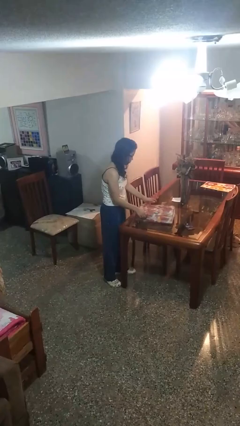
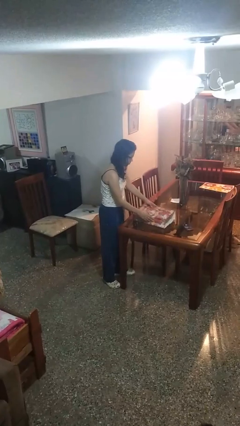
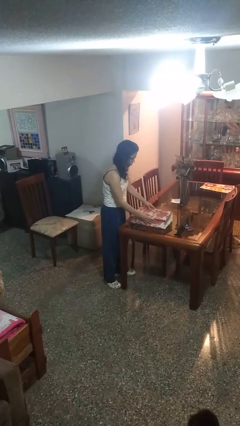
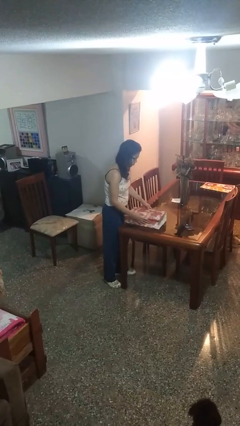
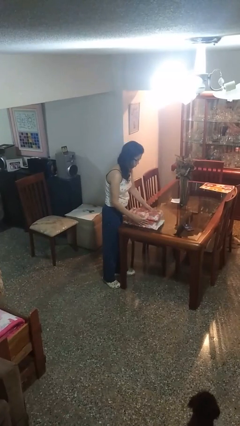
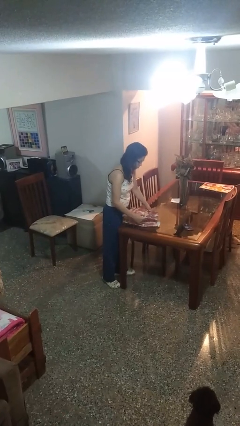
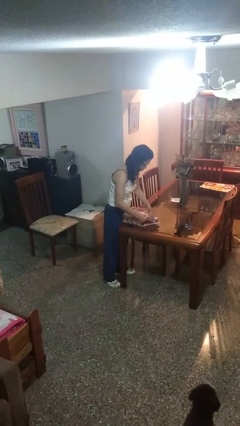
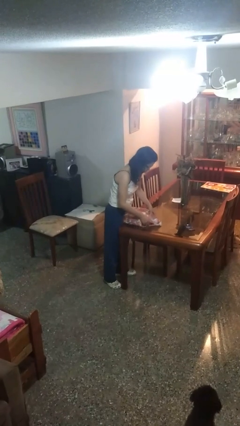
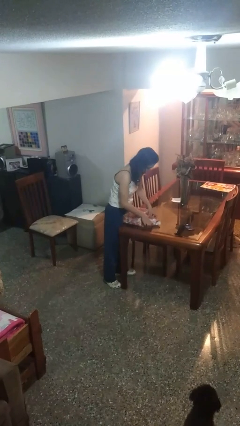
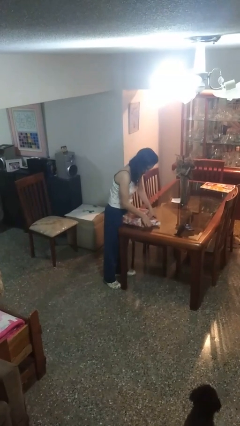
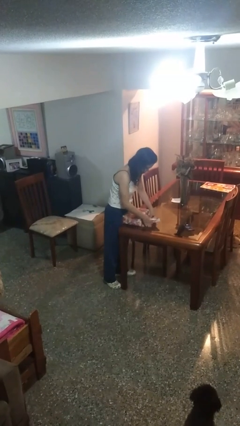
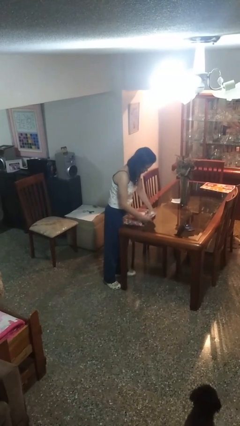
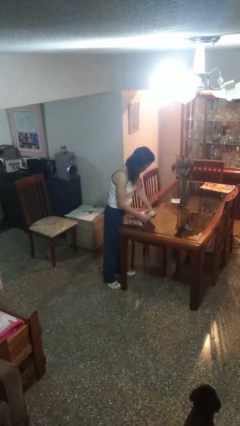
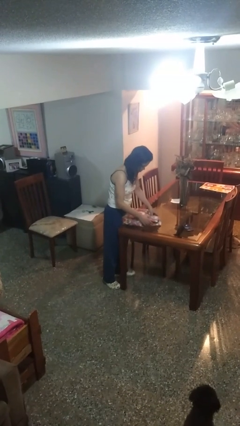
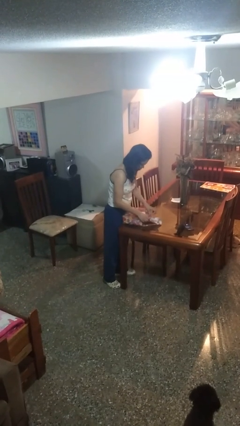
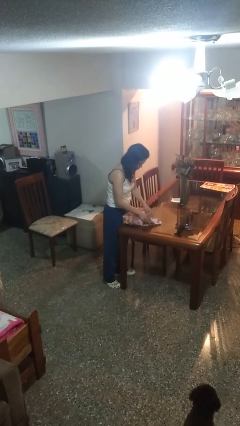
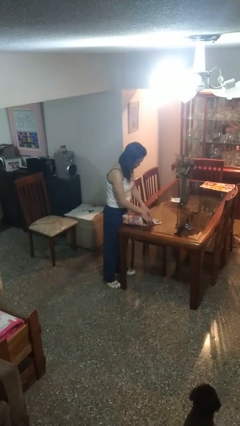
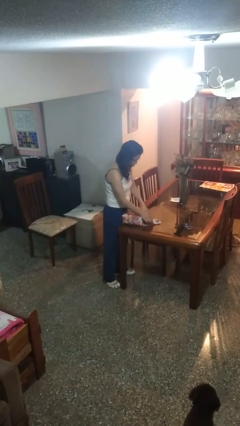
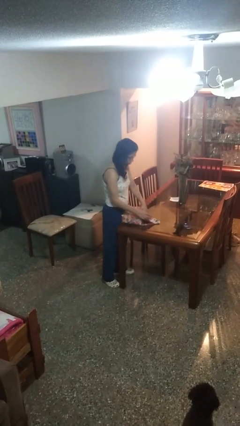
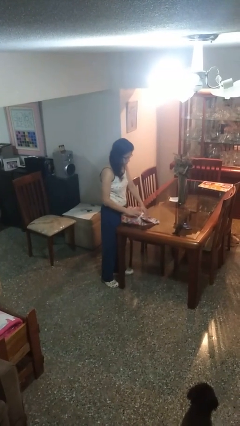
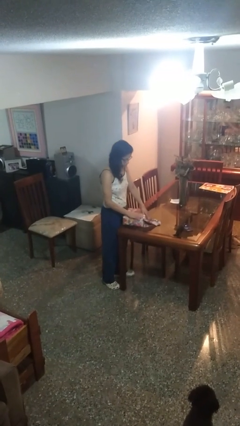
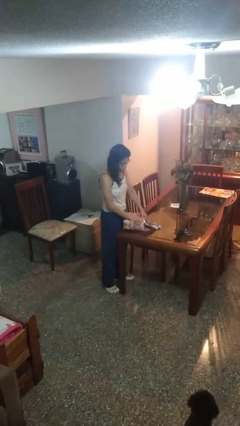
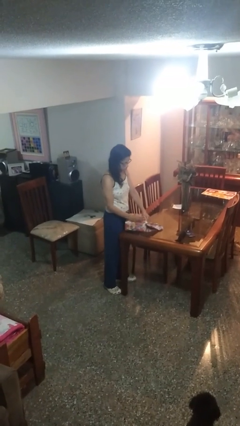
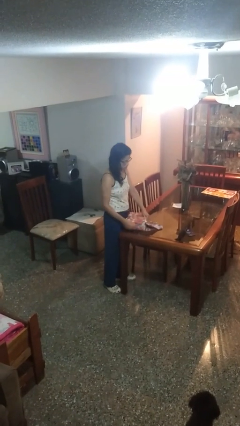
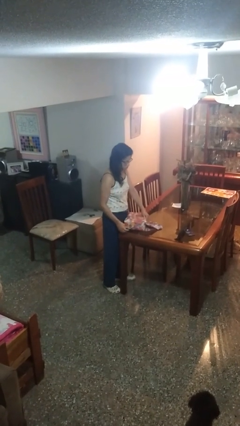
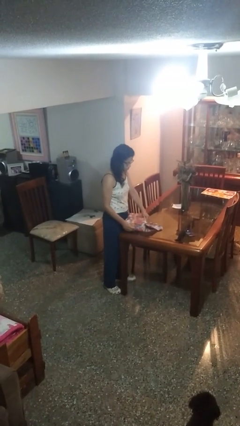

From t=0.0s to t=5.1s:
person wraps box

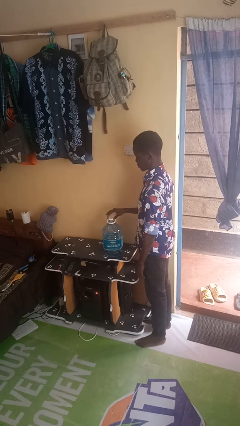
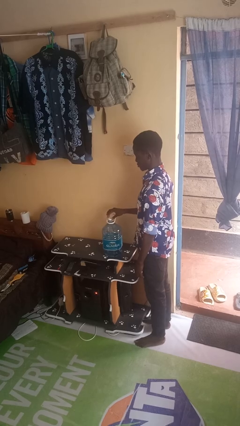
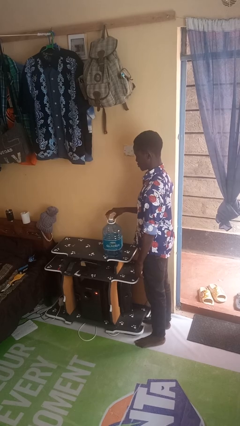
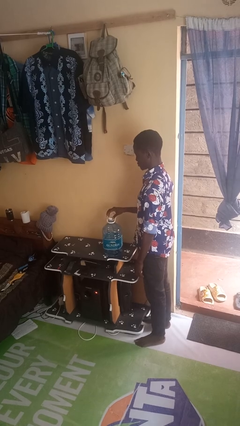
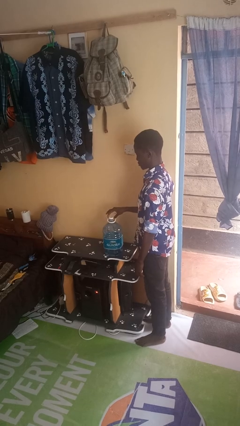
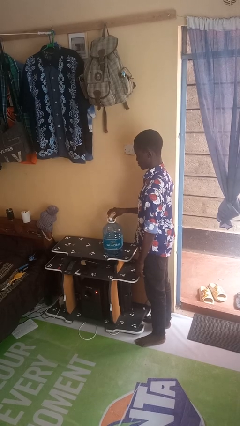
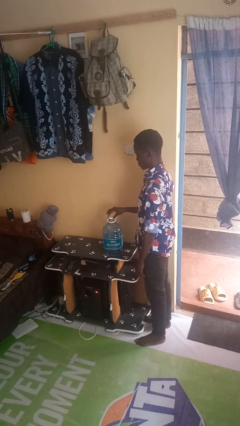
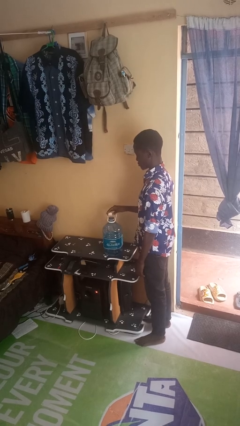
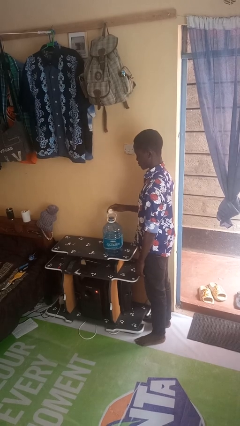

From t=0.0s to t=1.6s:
person unscrews lid from bottle

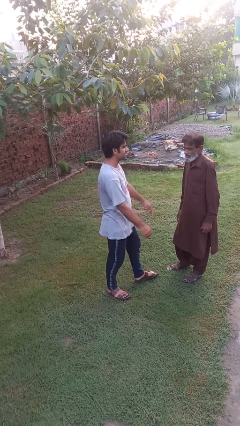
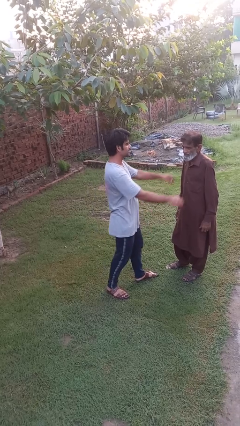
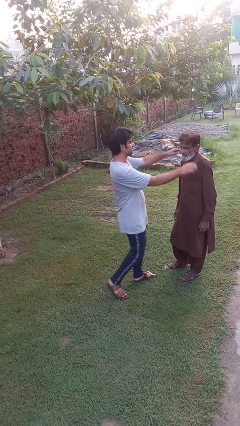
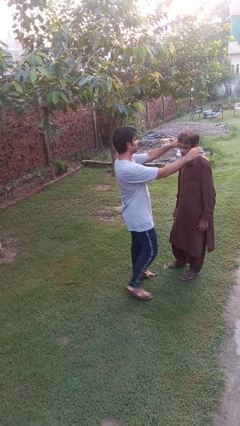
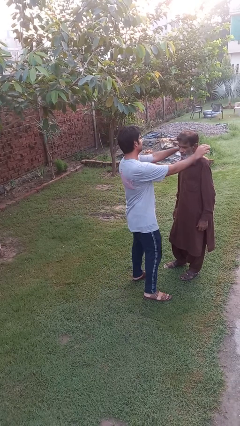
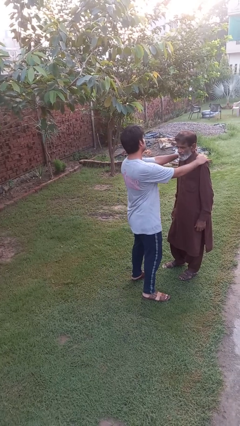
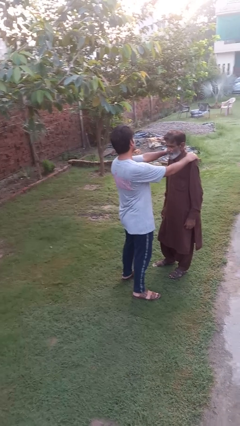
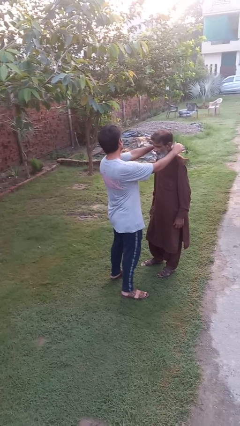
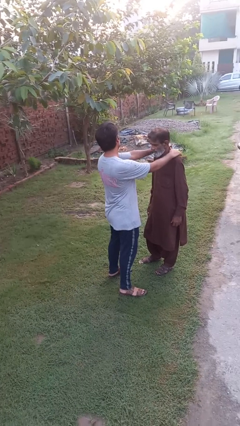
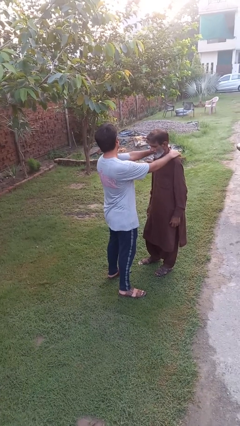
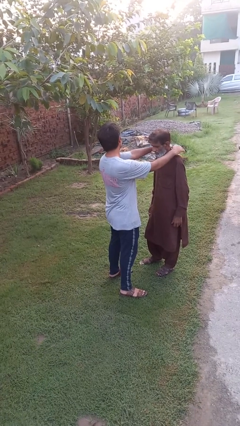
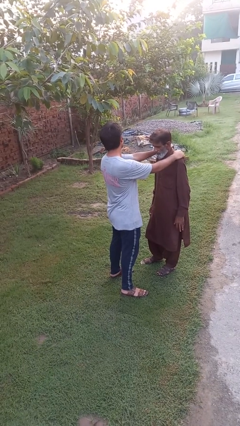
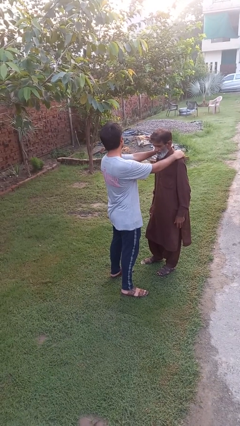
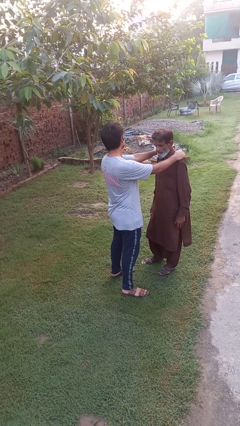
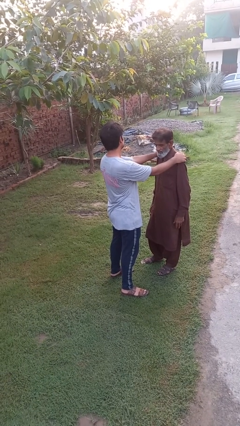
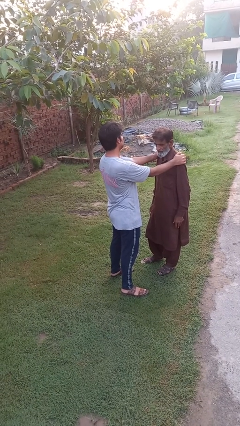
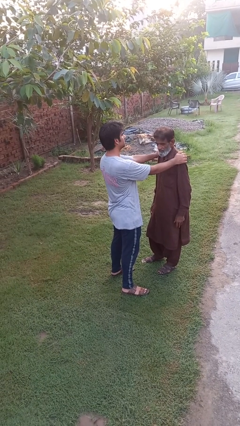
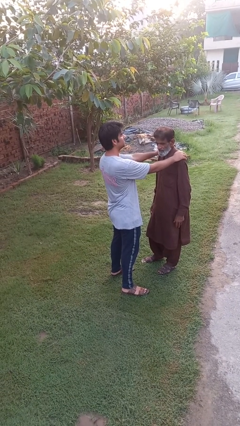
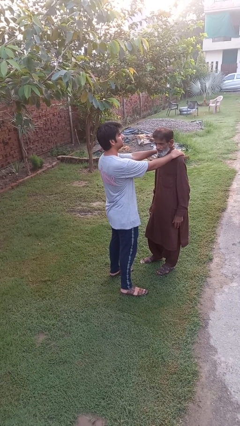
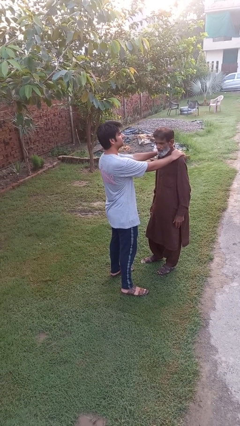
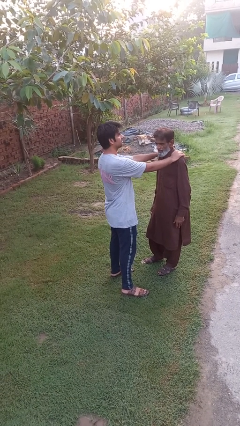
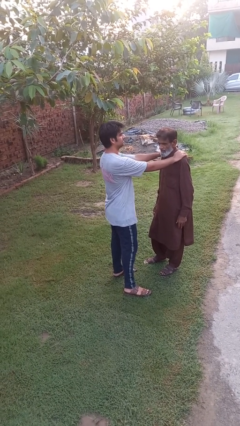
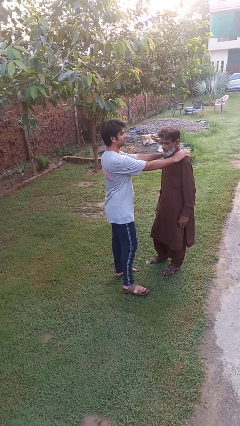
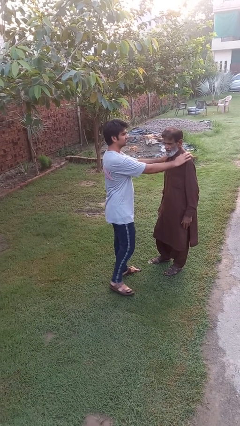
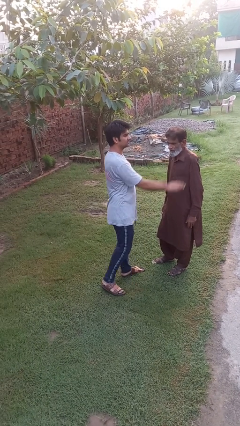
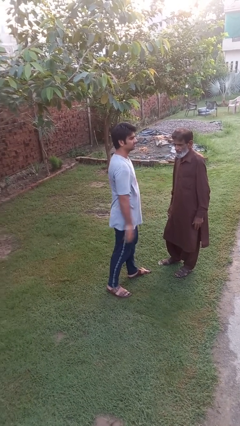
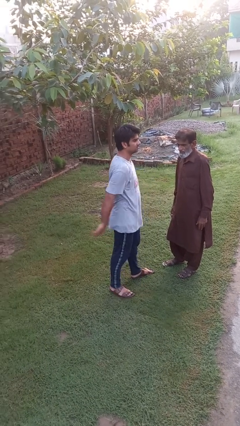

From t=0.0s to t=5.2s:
person pounds shoulders of person

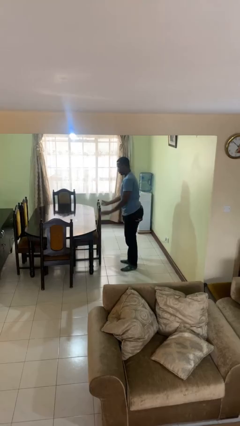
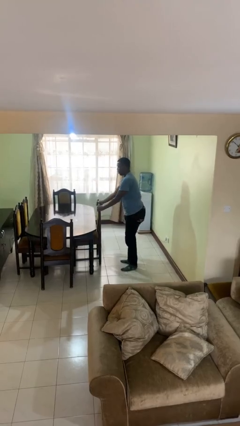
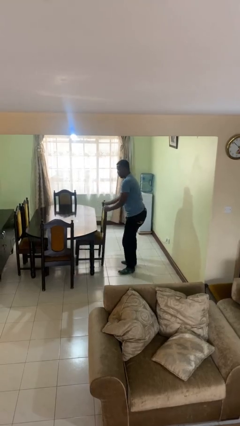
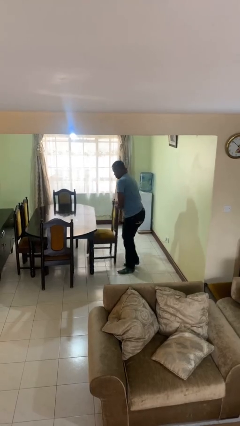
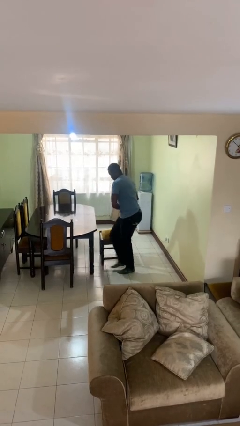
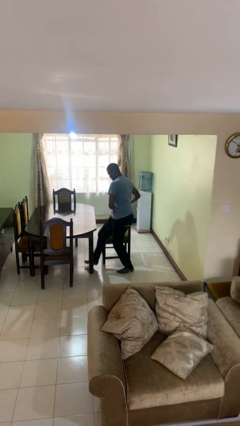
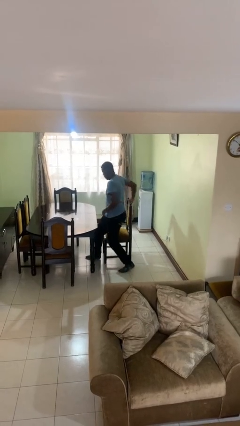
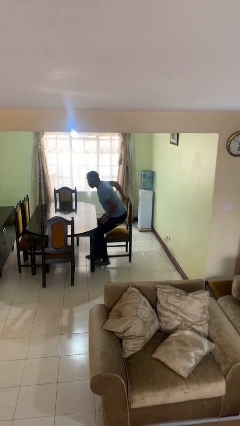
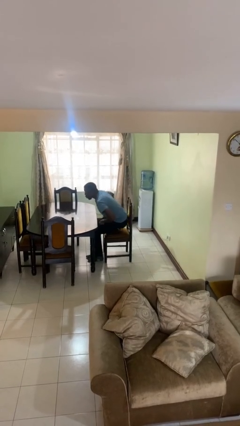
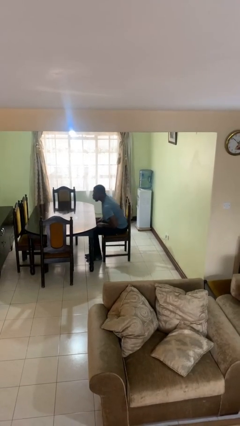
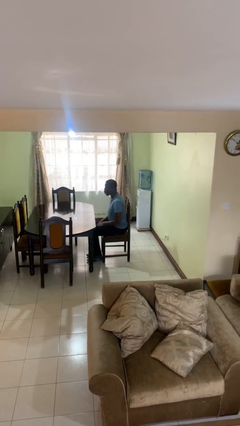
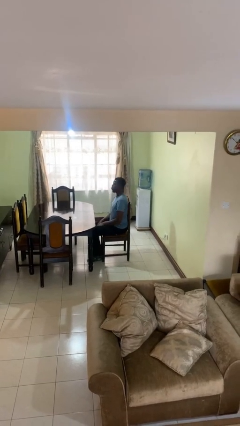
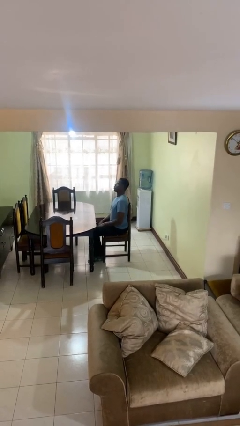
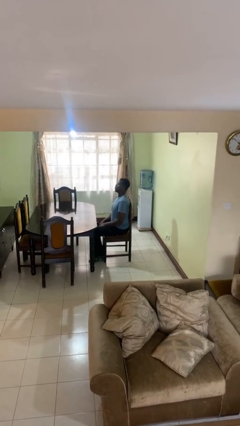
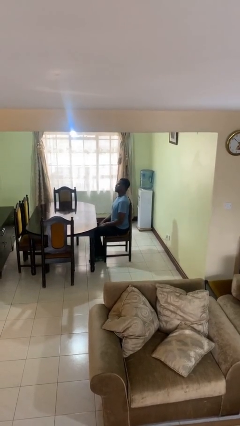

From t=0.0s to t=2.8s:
person sits down

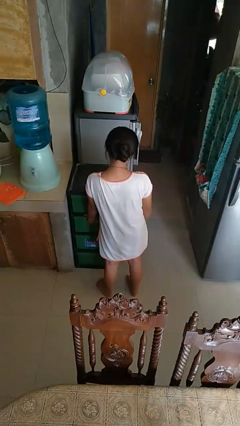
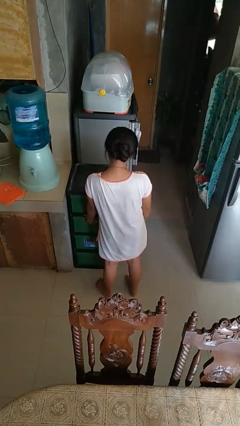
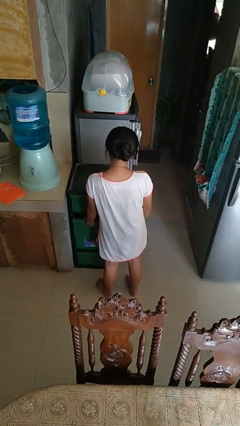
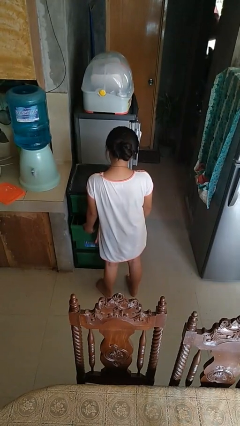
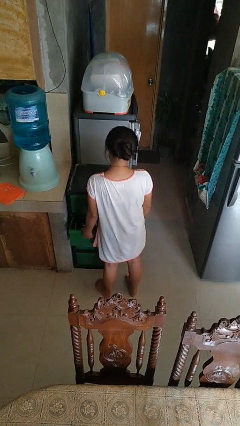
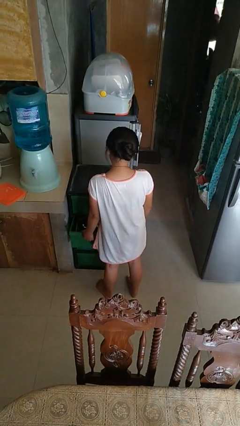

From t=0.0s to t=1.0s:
person opens kitchen drawer

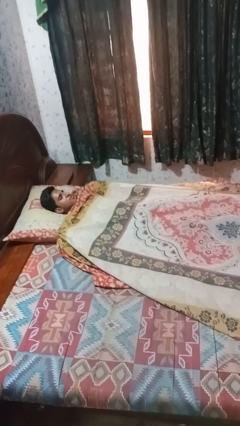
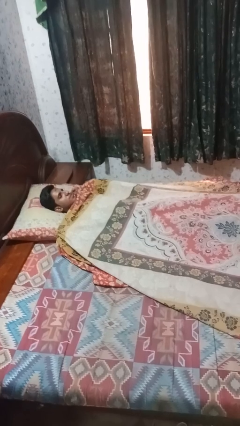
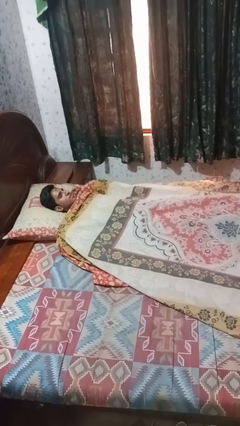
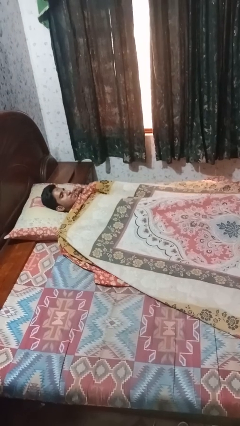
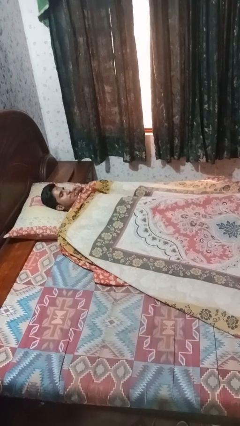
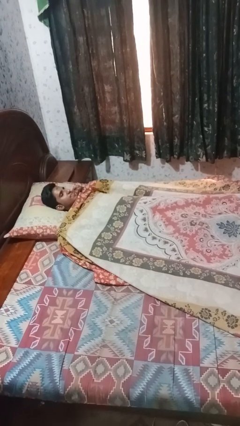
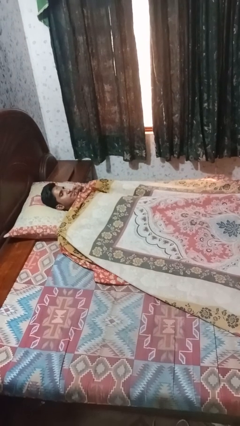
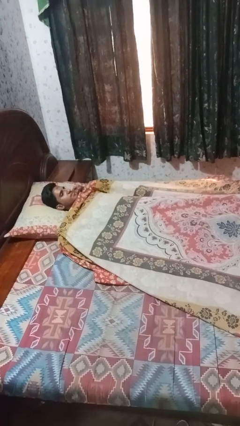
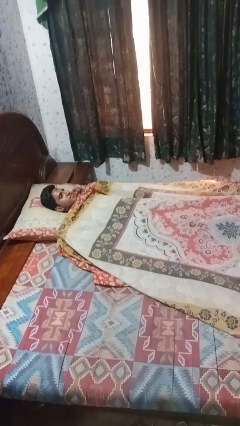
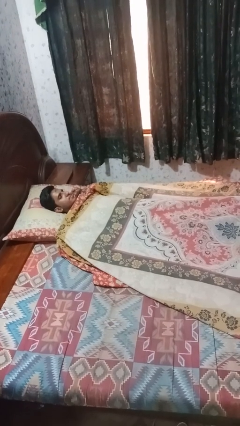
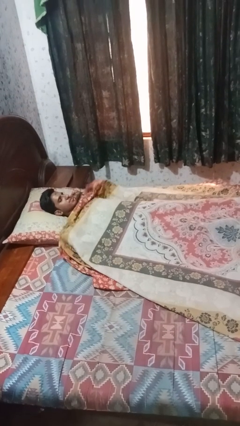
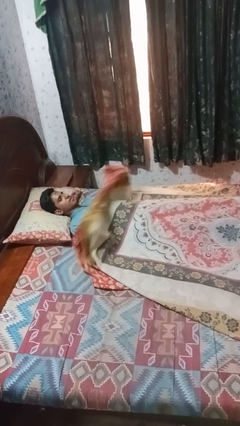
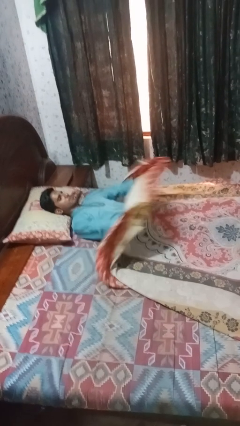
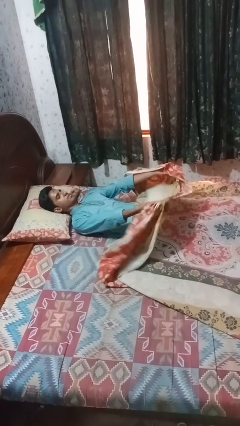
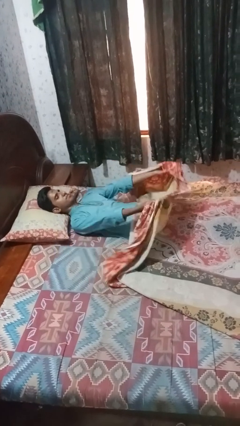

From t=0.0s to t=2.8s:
person covers with bedsheets
